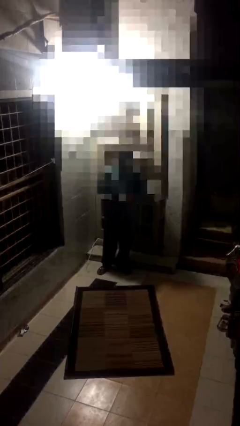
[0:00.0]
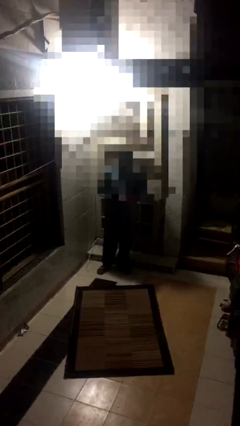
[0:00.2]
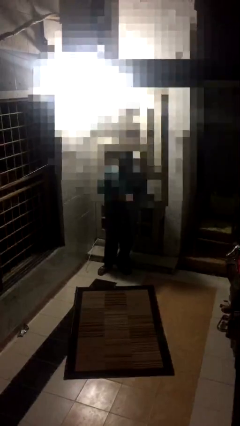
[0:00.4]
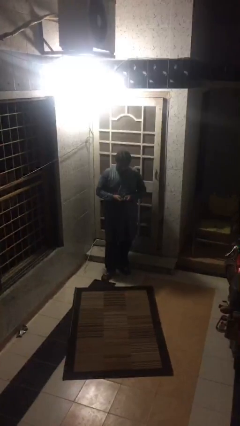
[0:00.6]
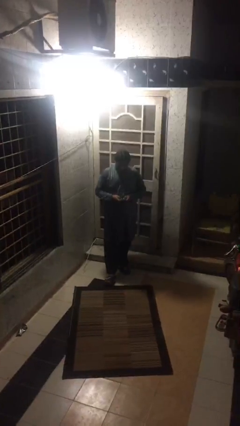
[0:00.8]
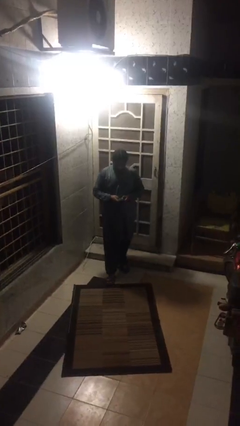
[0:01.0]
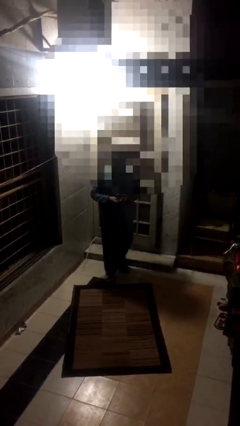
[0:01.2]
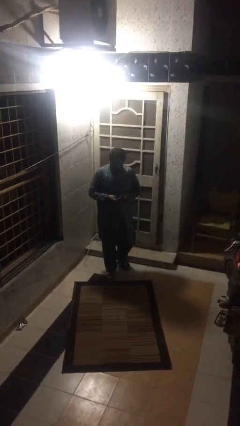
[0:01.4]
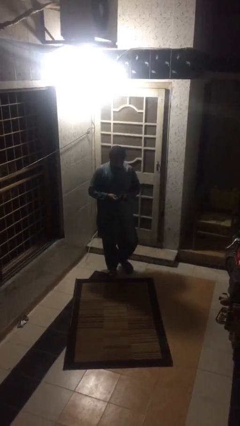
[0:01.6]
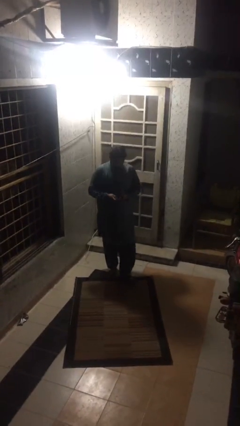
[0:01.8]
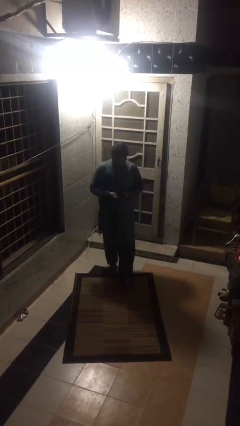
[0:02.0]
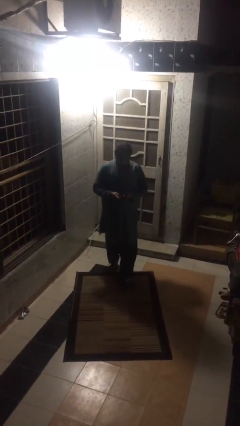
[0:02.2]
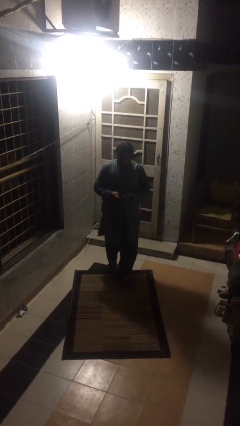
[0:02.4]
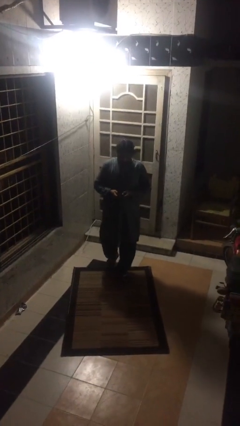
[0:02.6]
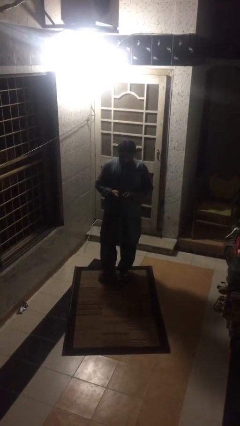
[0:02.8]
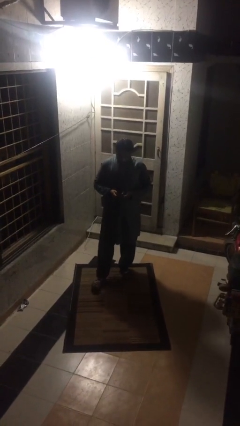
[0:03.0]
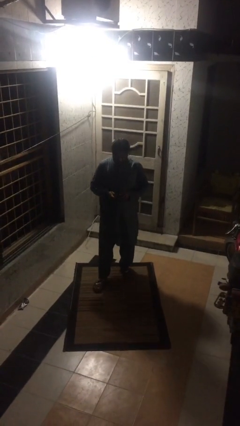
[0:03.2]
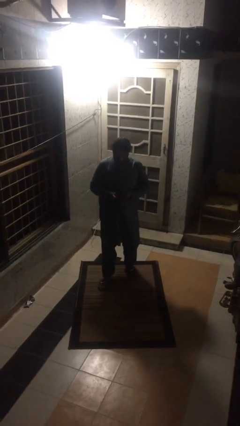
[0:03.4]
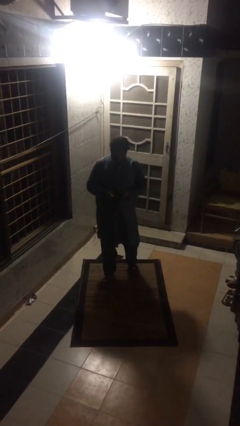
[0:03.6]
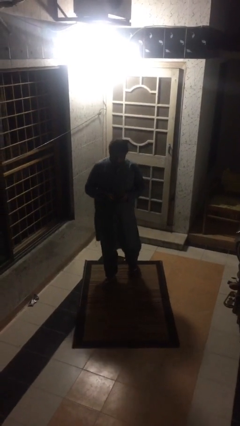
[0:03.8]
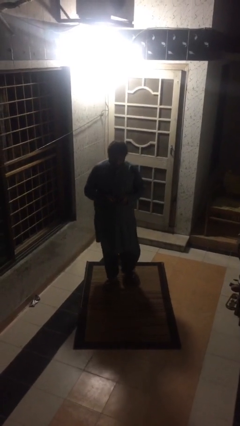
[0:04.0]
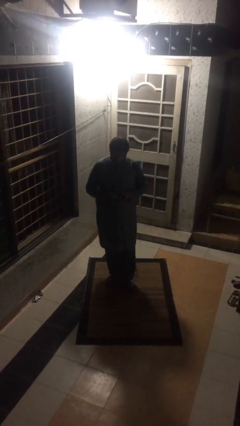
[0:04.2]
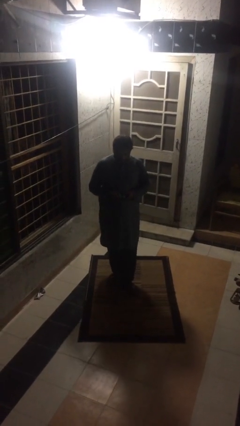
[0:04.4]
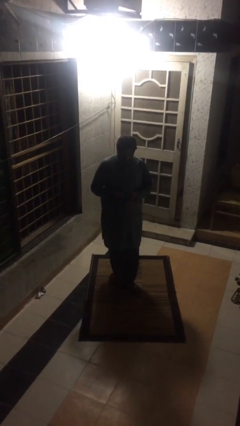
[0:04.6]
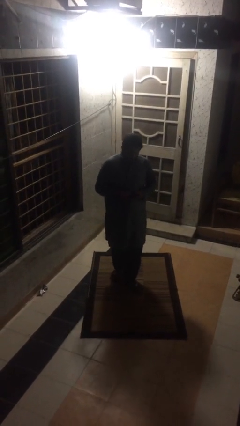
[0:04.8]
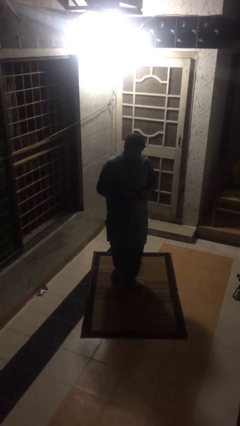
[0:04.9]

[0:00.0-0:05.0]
person texts on phone

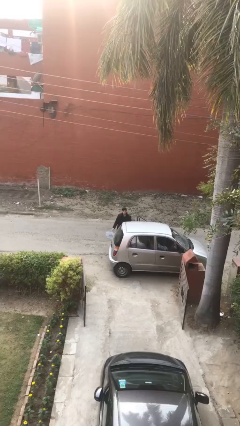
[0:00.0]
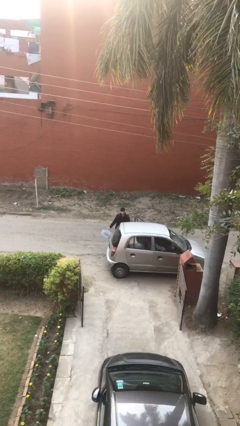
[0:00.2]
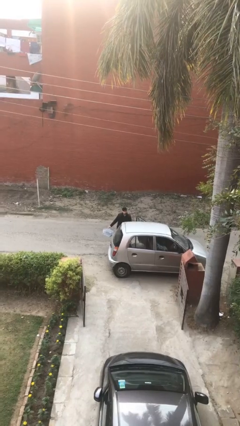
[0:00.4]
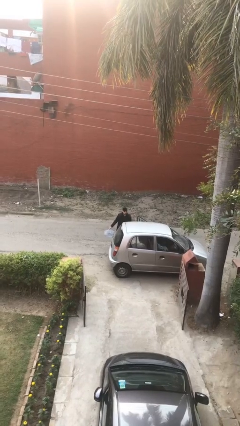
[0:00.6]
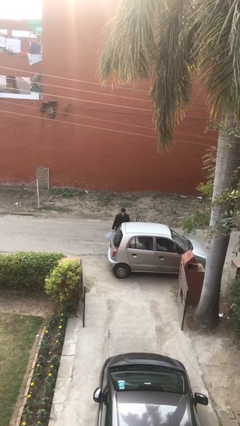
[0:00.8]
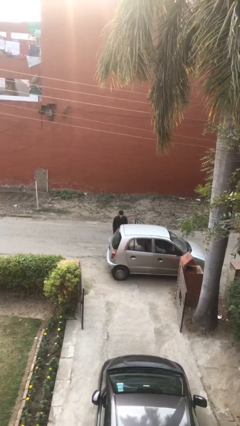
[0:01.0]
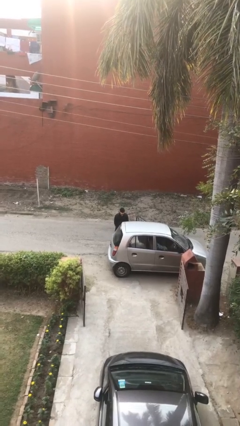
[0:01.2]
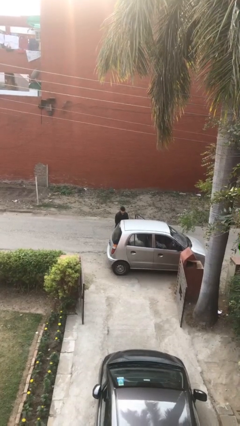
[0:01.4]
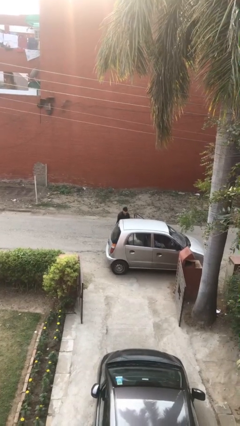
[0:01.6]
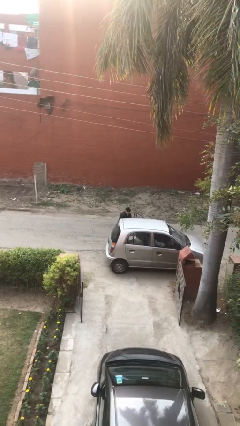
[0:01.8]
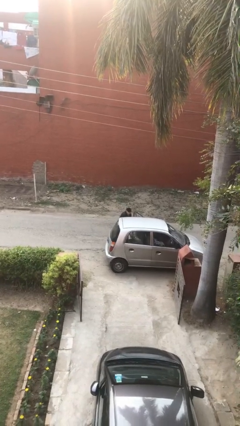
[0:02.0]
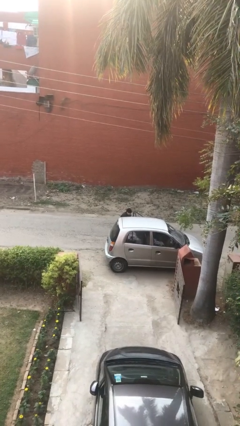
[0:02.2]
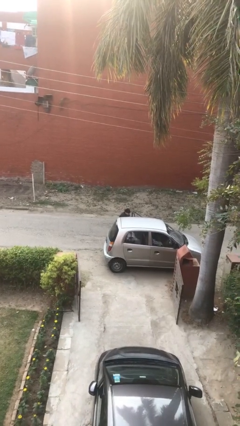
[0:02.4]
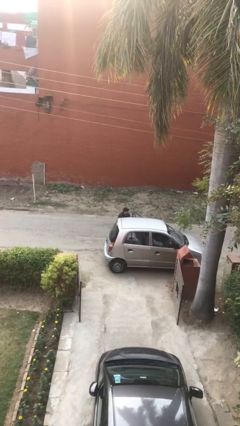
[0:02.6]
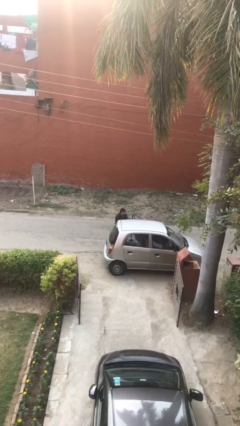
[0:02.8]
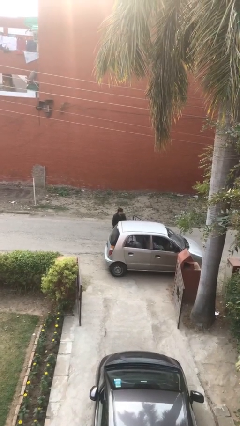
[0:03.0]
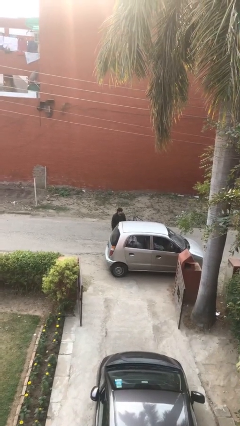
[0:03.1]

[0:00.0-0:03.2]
person loads car

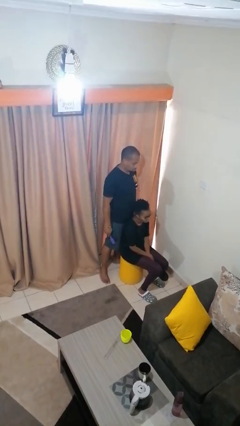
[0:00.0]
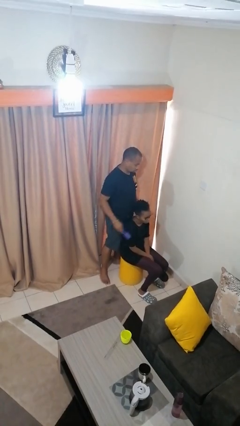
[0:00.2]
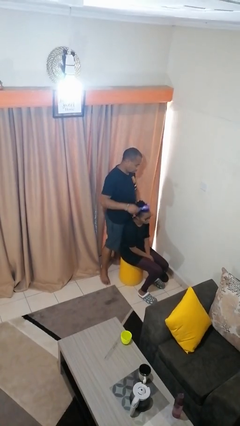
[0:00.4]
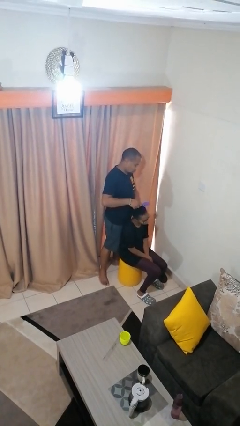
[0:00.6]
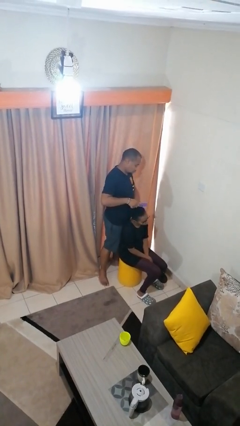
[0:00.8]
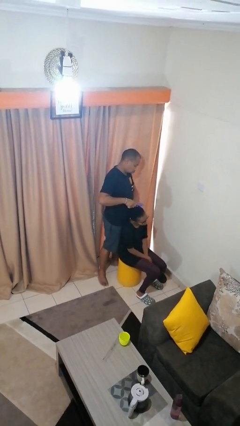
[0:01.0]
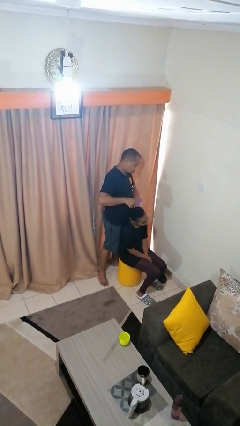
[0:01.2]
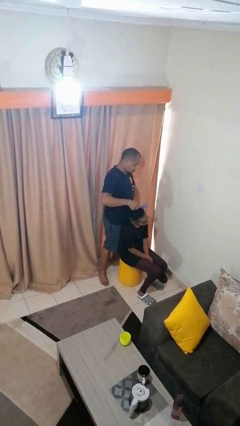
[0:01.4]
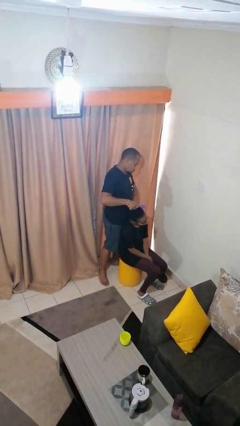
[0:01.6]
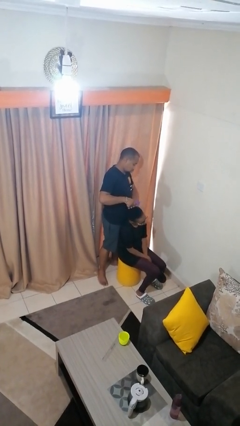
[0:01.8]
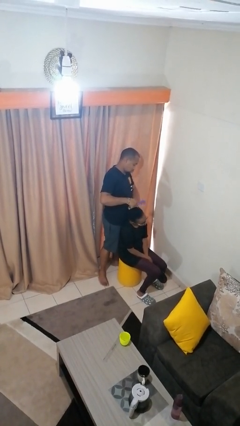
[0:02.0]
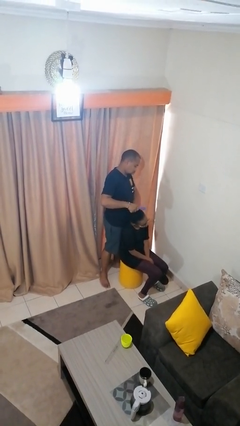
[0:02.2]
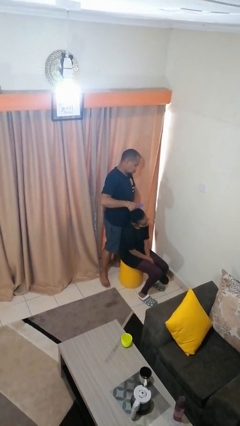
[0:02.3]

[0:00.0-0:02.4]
person brushes hair of person

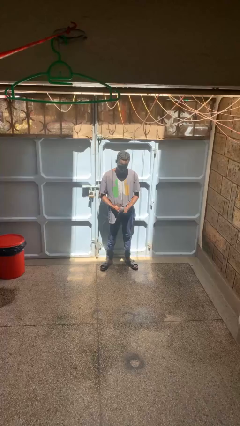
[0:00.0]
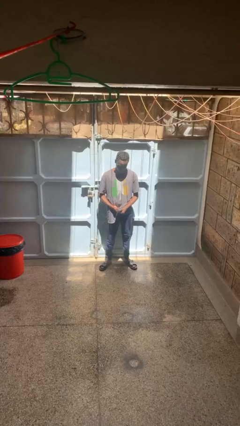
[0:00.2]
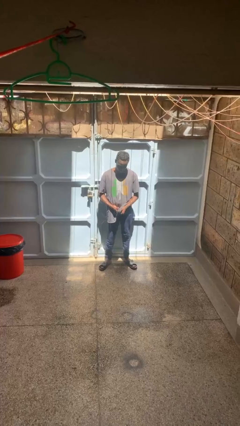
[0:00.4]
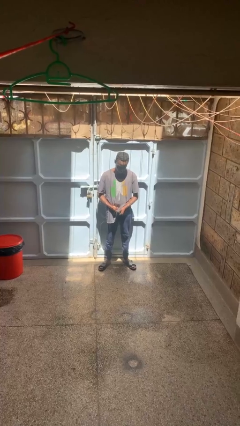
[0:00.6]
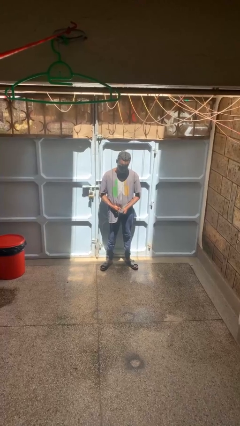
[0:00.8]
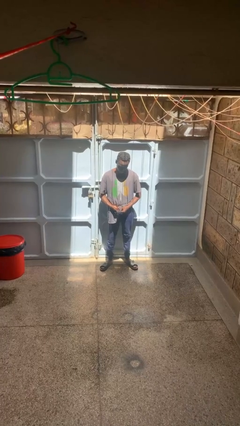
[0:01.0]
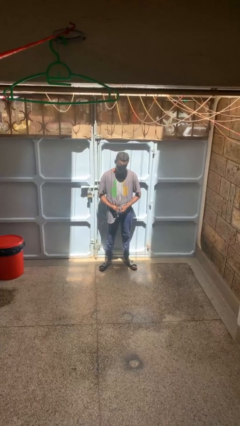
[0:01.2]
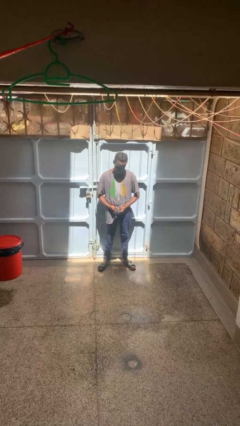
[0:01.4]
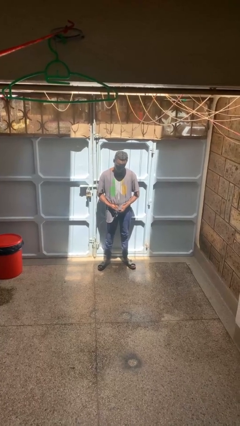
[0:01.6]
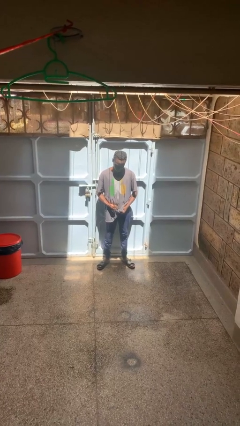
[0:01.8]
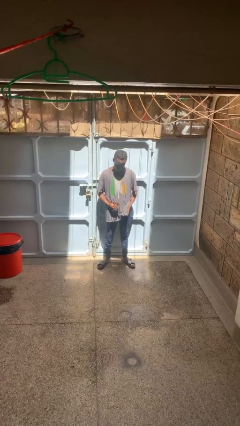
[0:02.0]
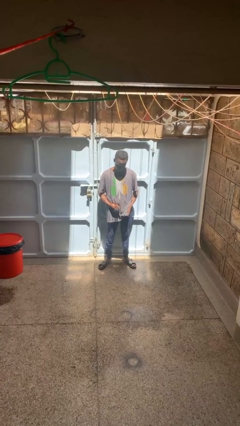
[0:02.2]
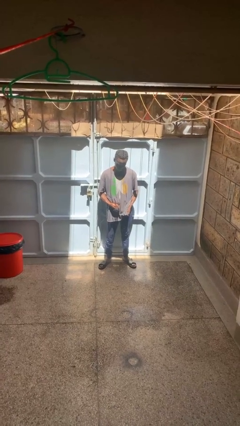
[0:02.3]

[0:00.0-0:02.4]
person cleans eyeglasses

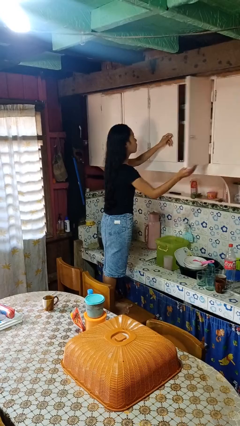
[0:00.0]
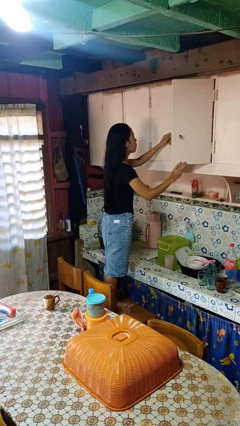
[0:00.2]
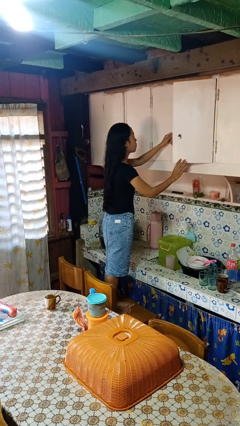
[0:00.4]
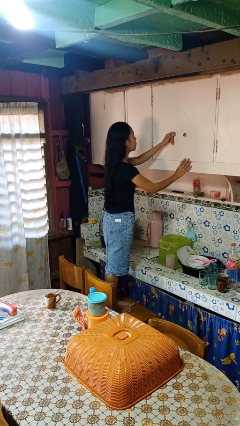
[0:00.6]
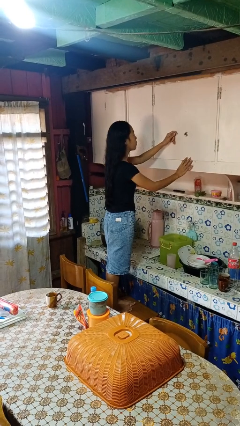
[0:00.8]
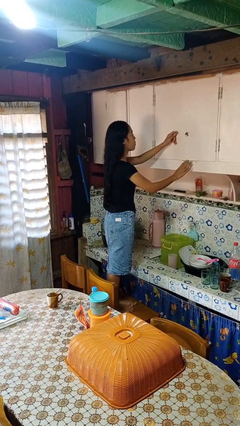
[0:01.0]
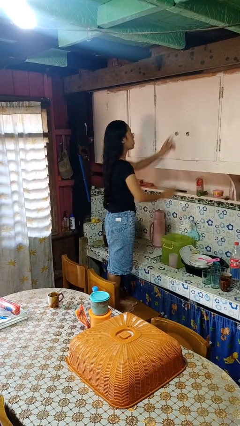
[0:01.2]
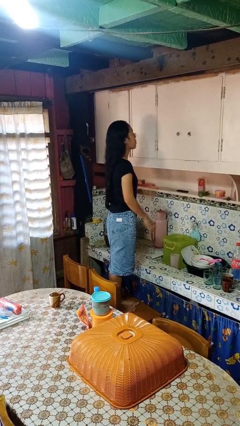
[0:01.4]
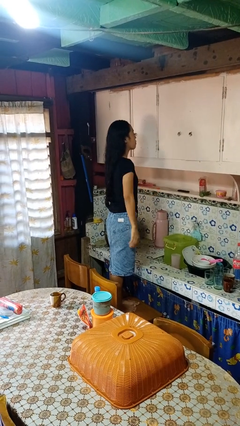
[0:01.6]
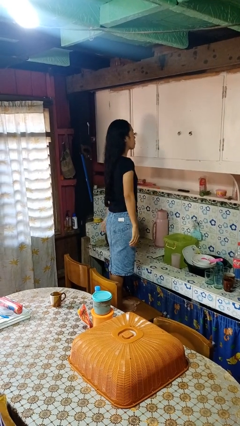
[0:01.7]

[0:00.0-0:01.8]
person closes cabinet

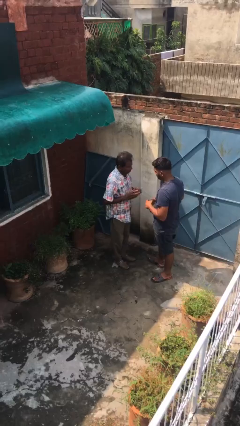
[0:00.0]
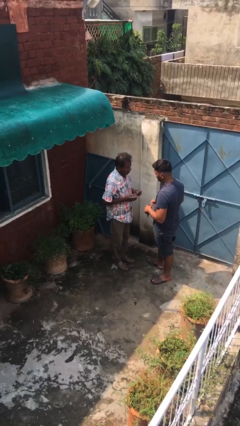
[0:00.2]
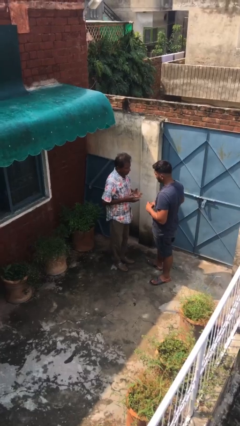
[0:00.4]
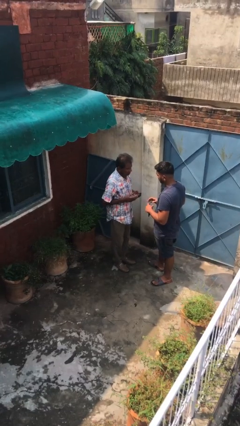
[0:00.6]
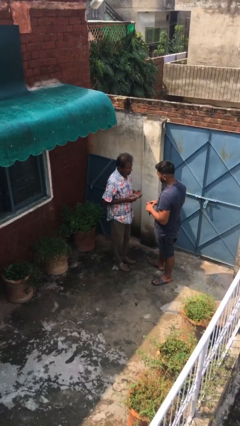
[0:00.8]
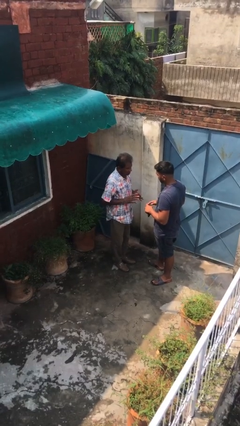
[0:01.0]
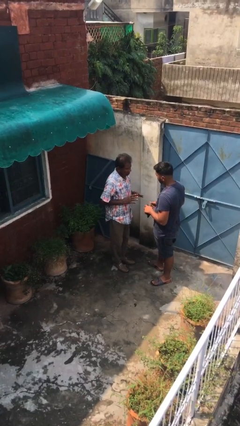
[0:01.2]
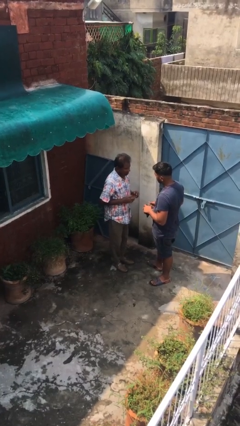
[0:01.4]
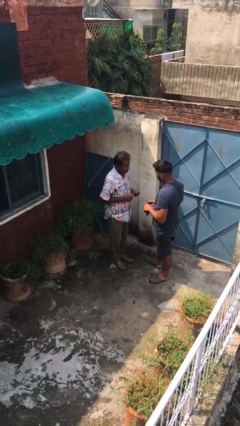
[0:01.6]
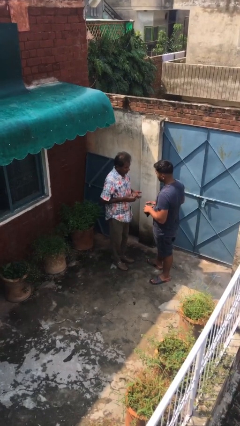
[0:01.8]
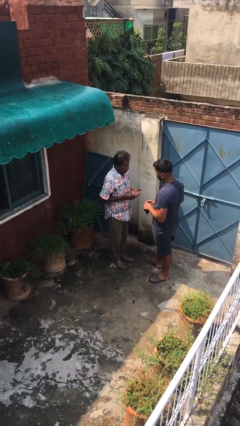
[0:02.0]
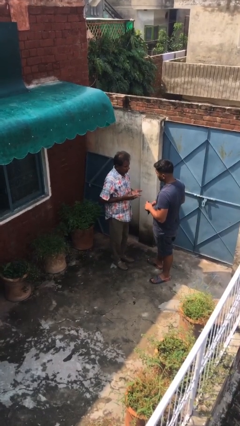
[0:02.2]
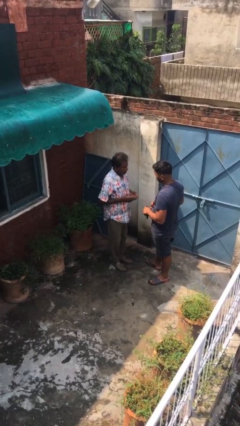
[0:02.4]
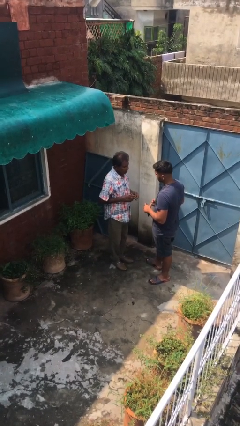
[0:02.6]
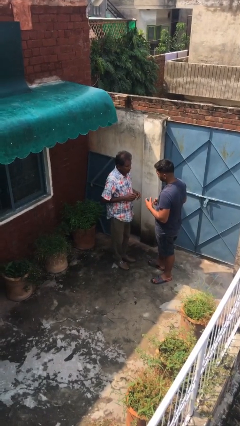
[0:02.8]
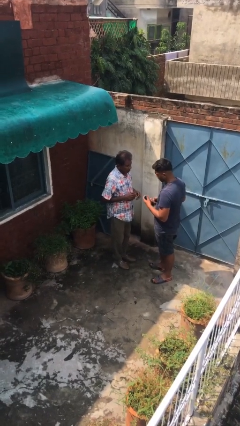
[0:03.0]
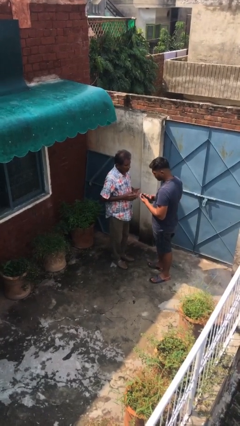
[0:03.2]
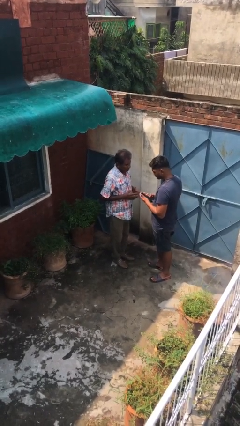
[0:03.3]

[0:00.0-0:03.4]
person talks to person
